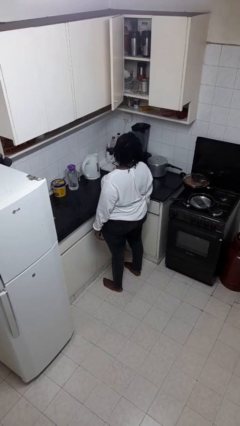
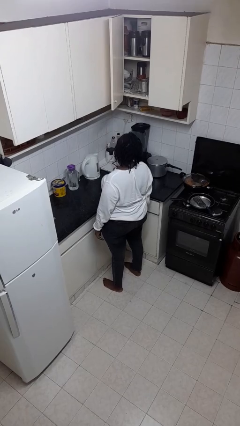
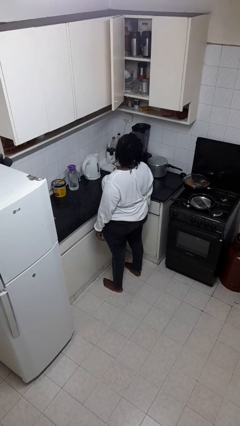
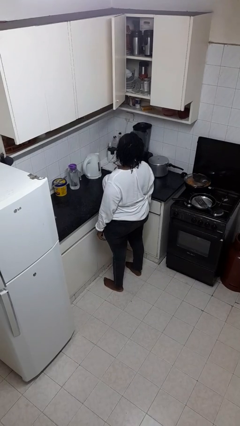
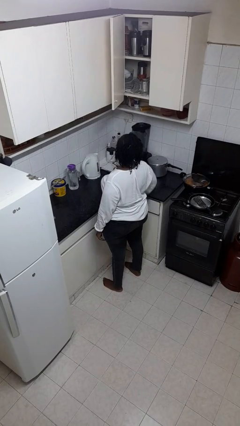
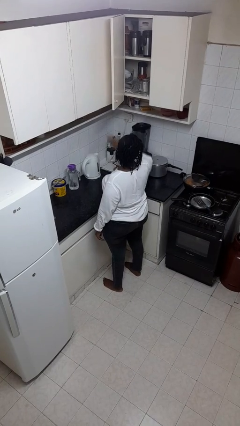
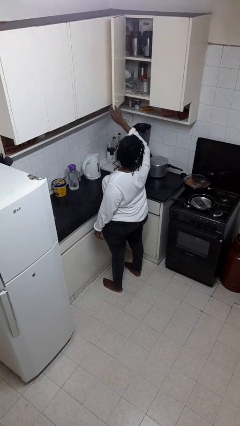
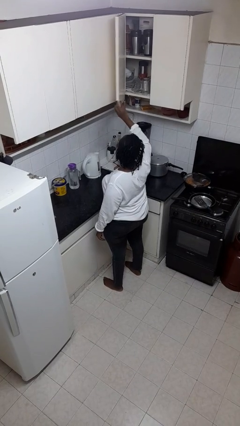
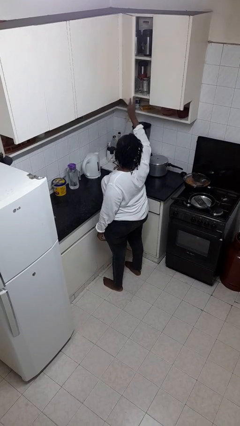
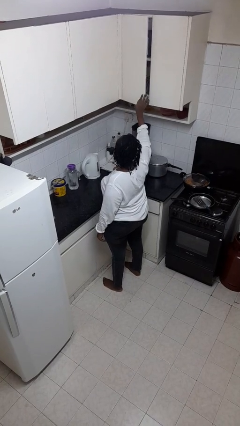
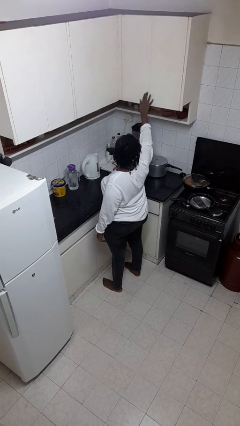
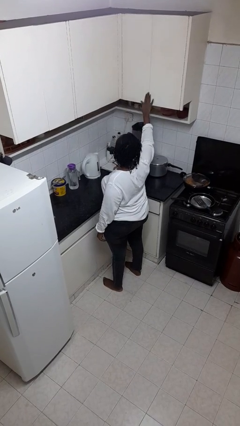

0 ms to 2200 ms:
person closes cabinet

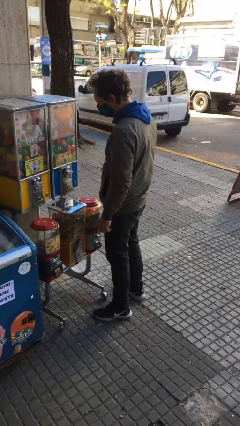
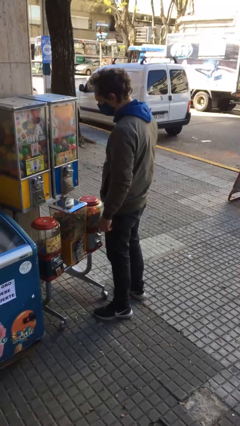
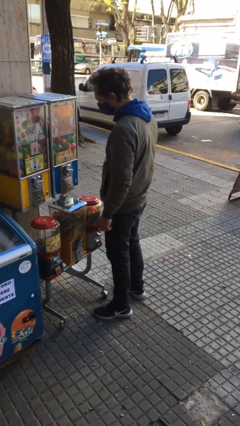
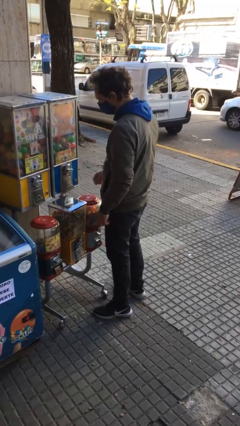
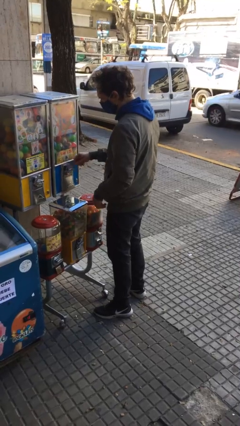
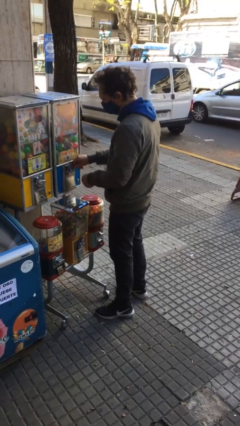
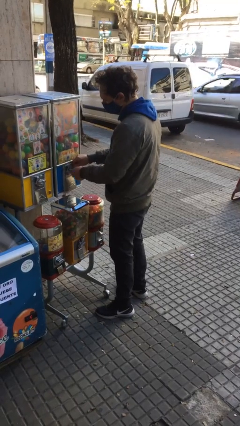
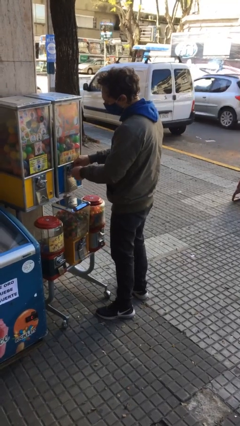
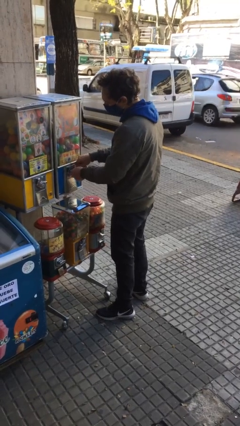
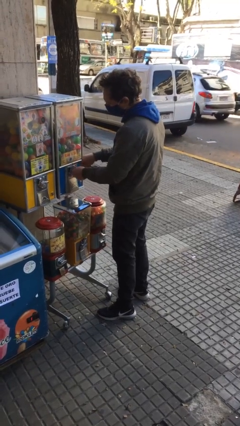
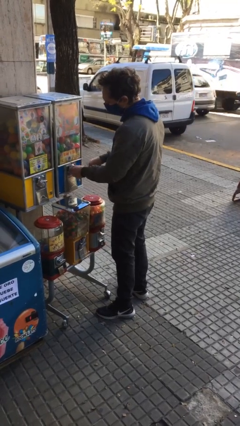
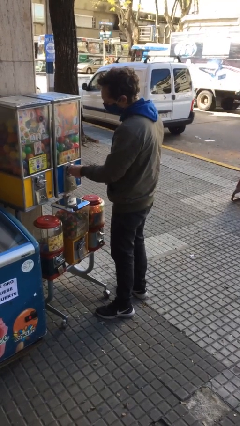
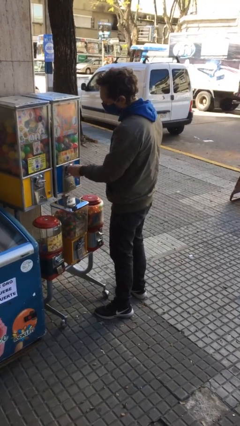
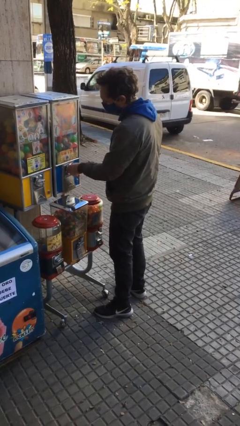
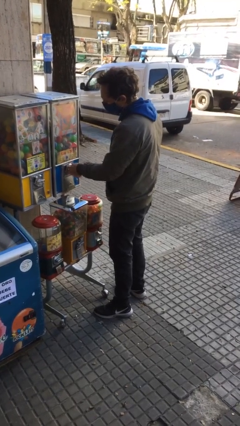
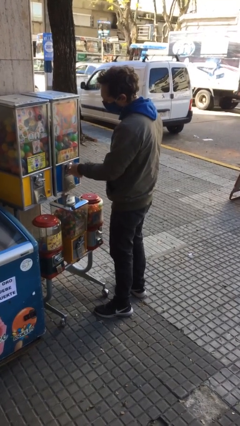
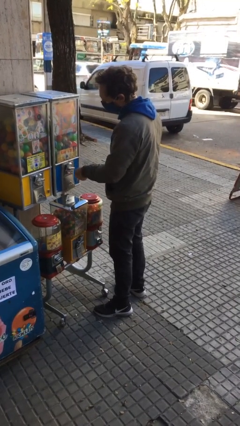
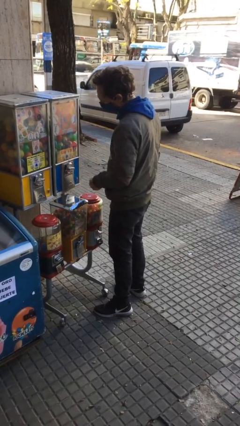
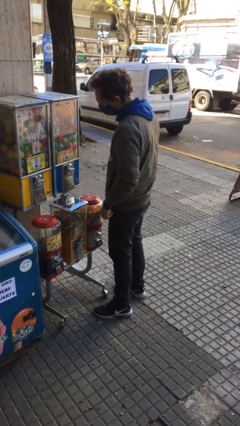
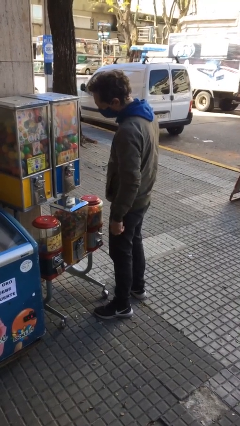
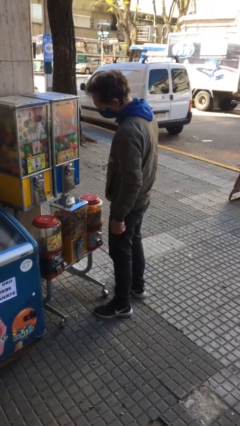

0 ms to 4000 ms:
person purchases from machine

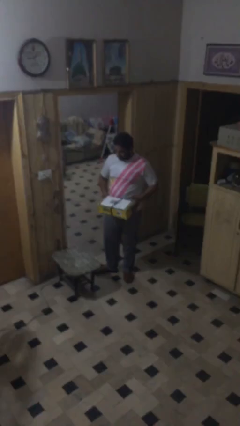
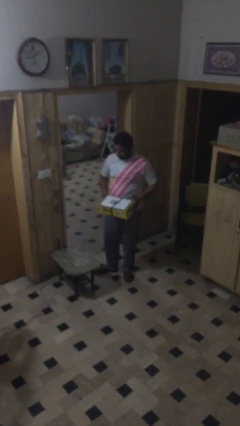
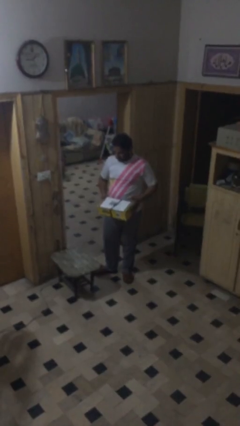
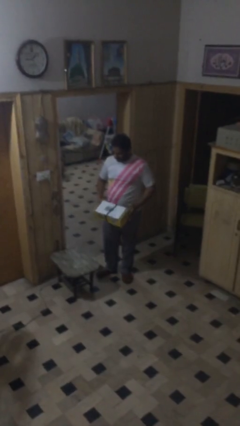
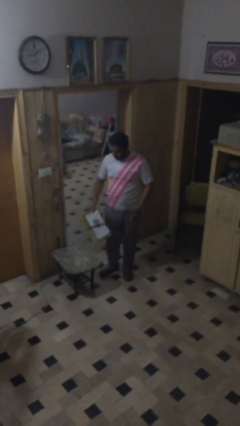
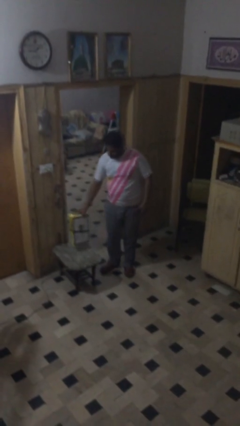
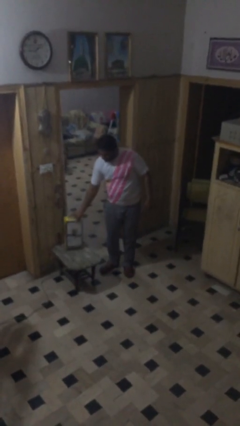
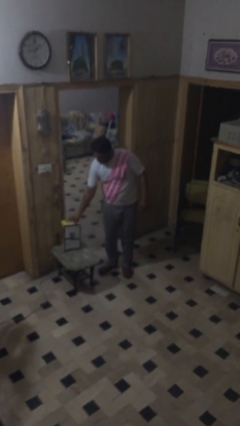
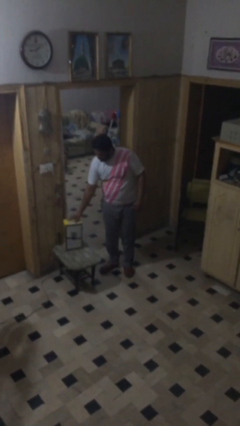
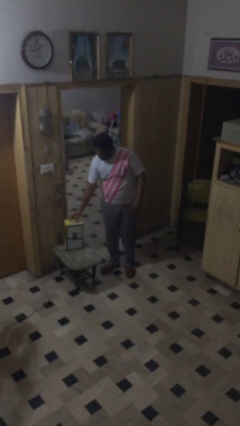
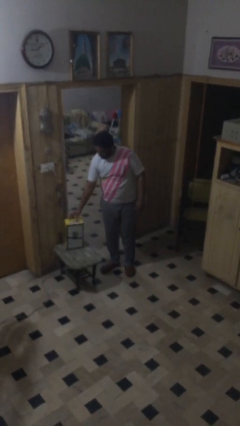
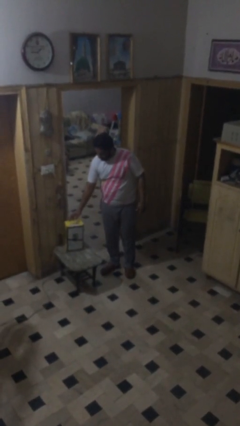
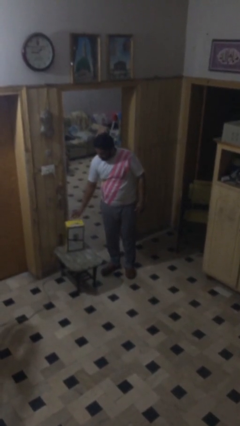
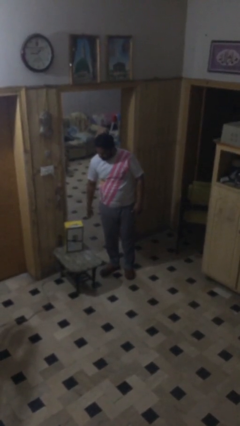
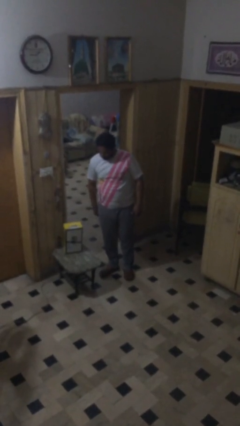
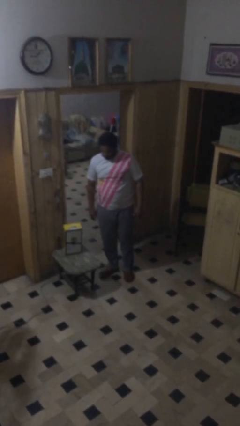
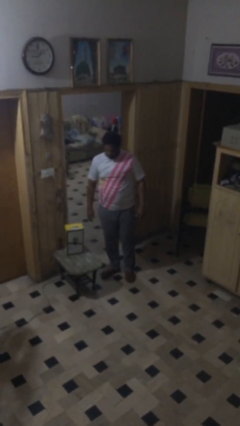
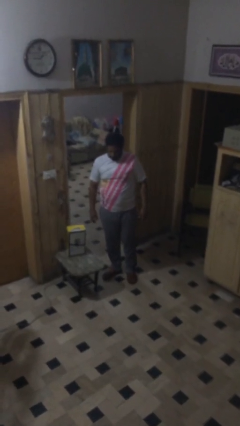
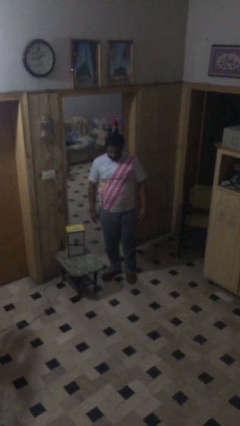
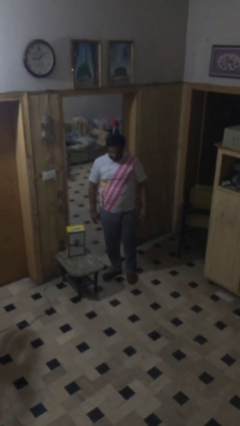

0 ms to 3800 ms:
person puts down object on table

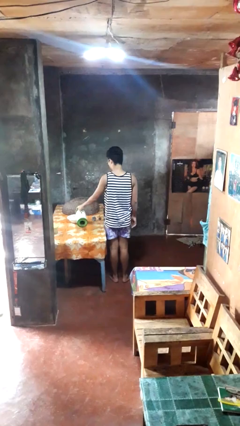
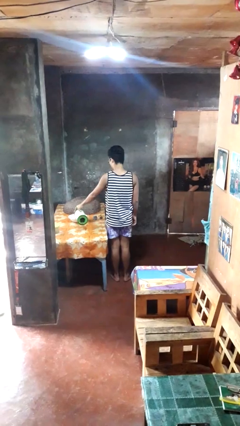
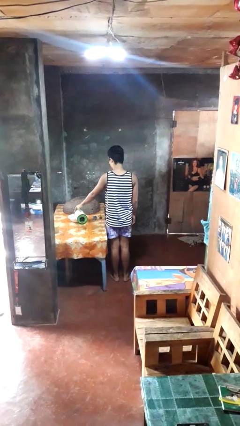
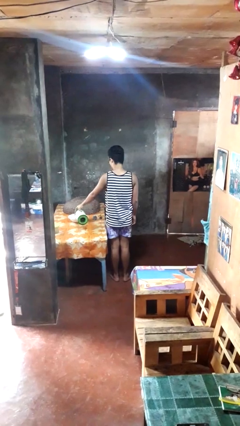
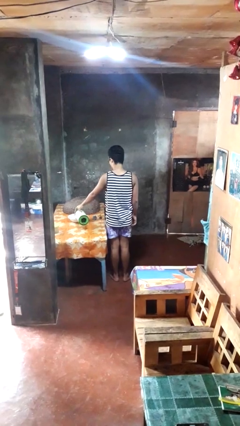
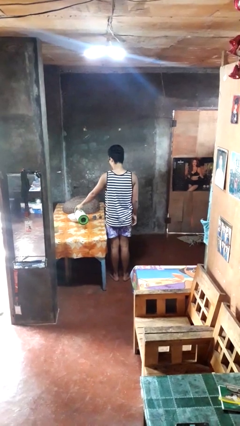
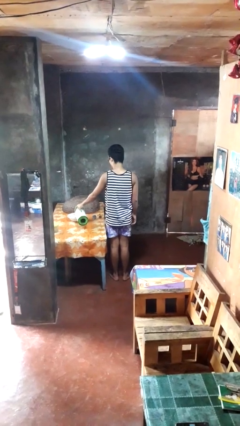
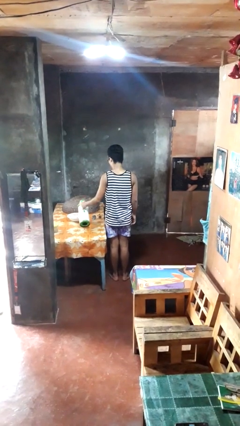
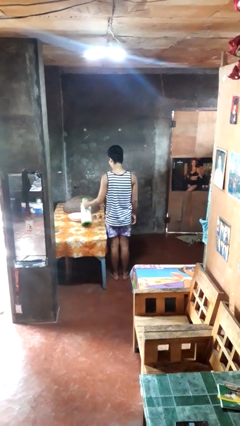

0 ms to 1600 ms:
person pours into bowl

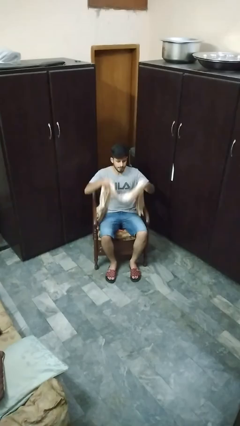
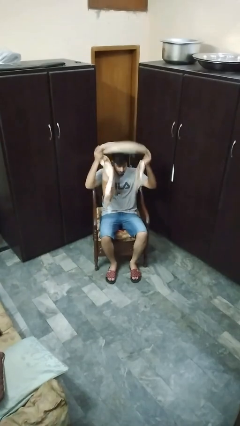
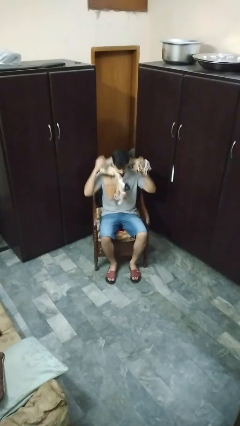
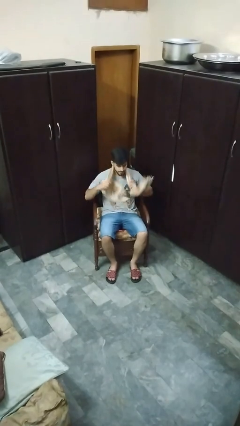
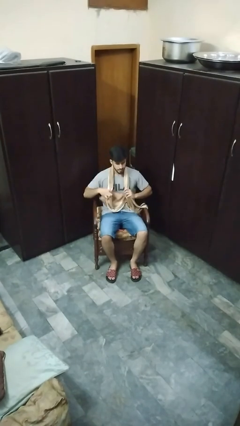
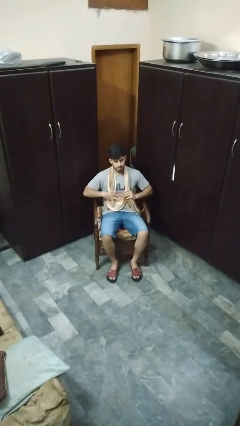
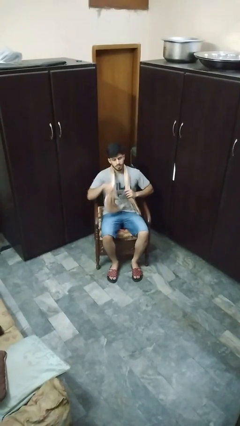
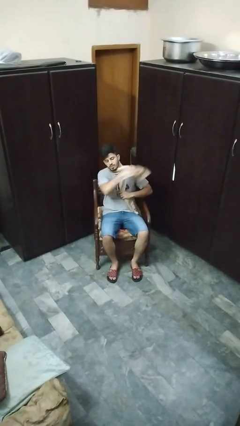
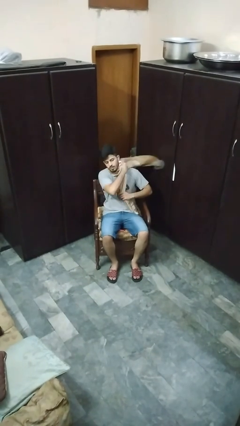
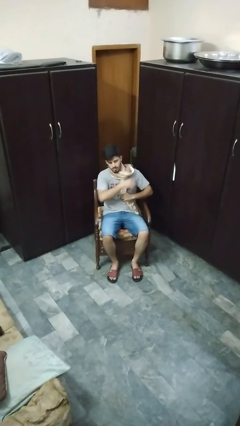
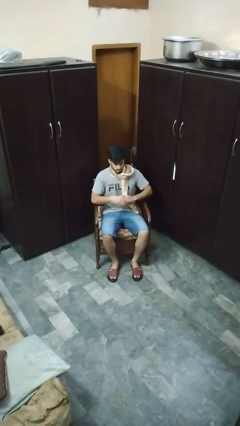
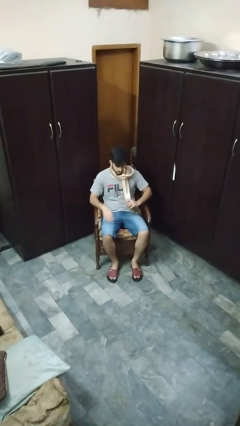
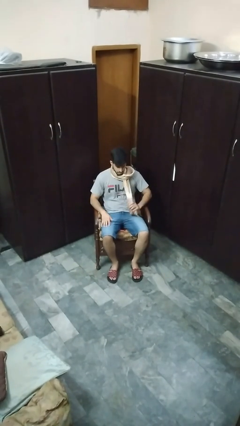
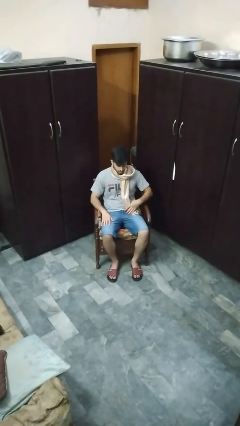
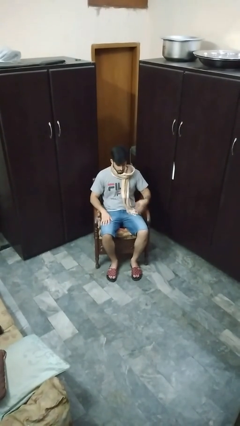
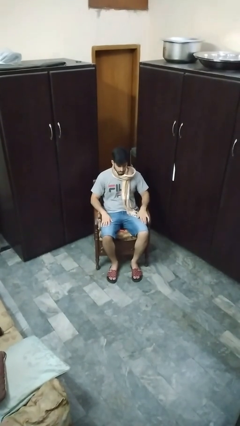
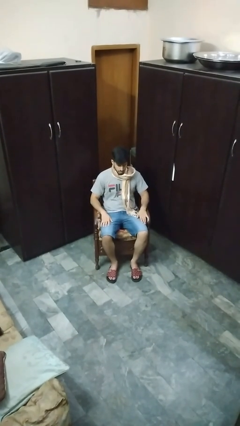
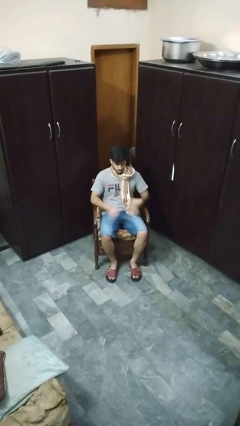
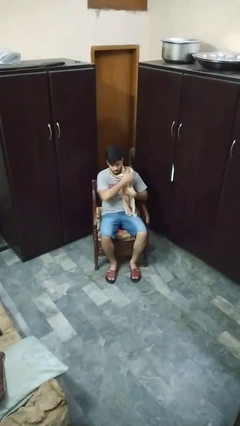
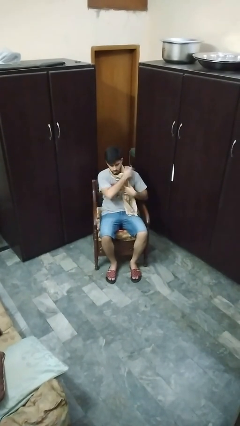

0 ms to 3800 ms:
person puts on scarf

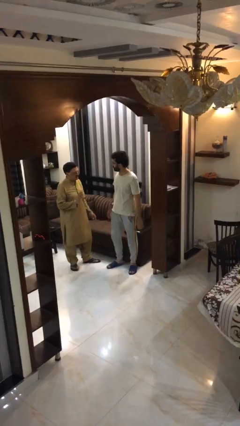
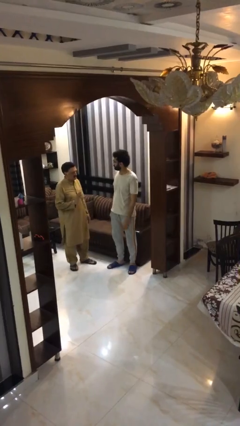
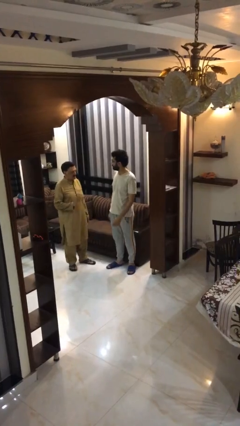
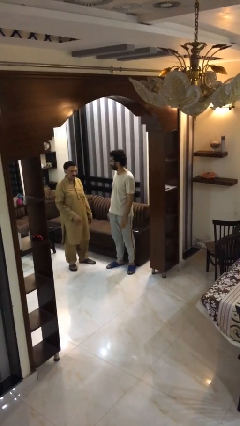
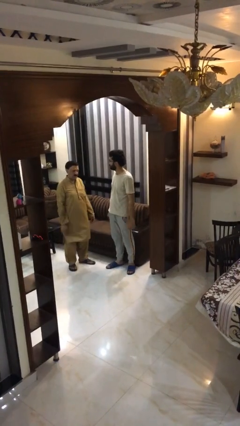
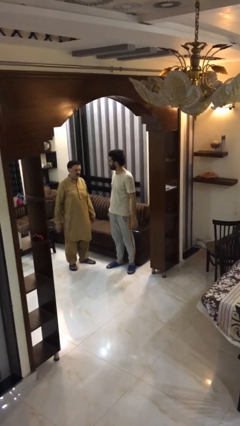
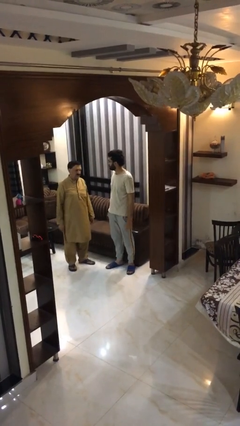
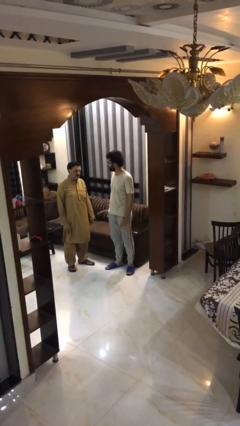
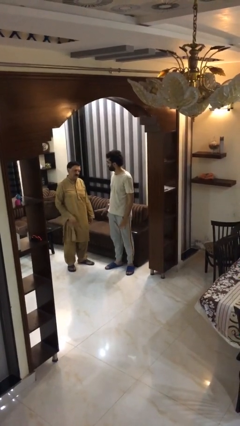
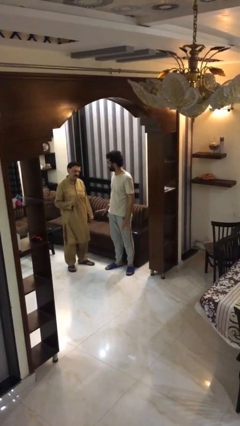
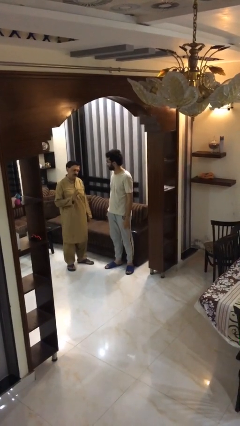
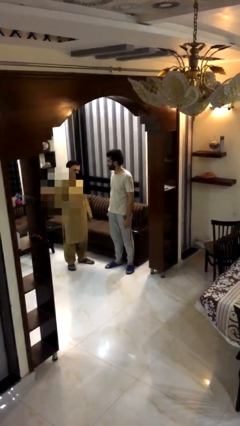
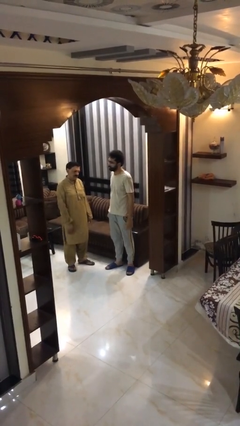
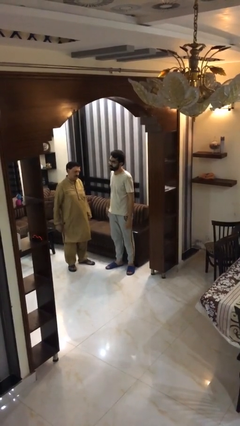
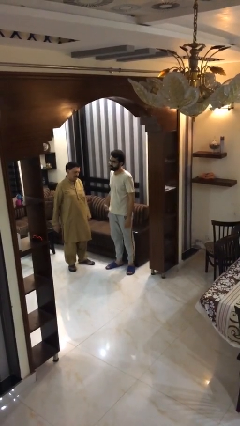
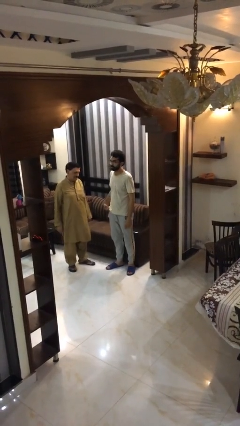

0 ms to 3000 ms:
person talks to person
